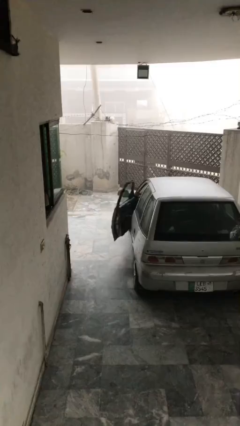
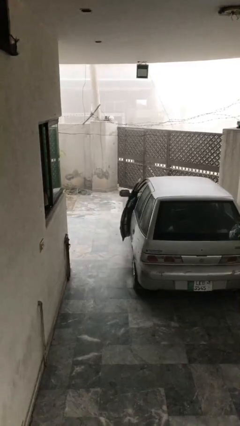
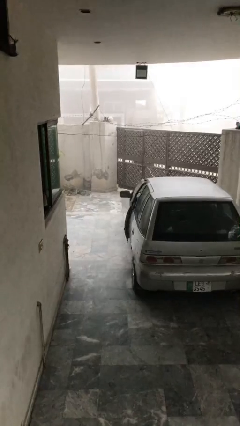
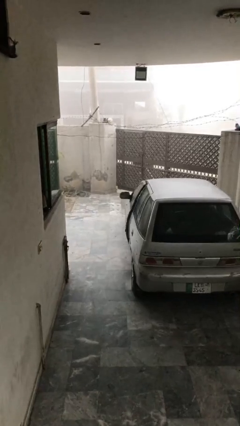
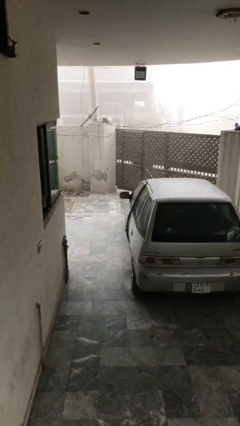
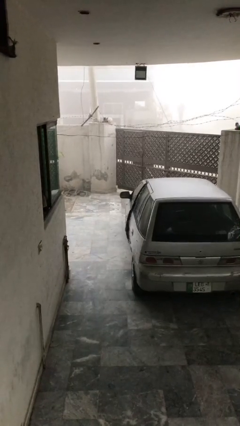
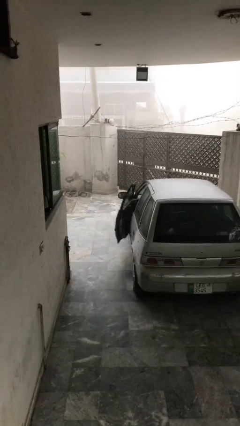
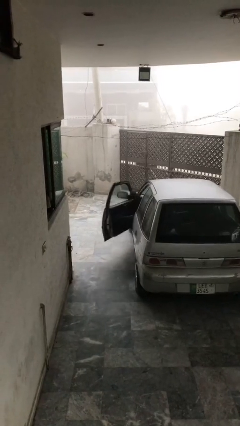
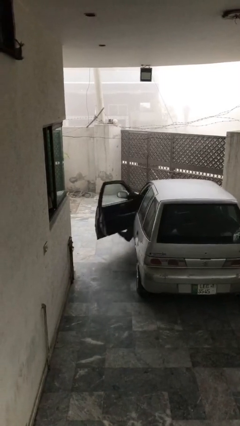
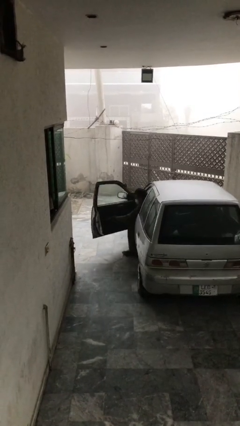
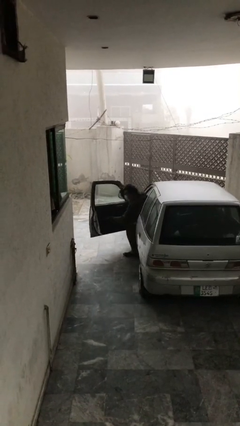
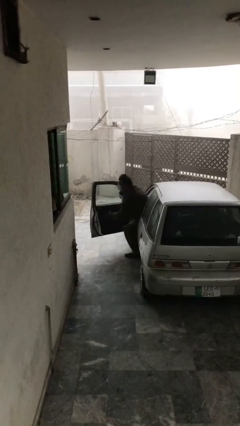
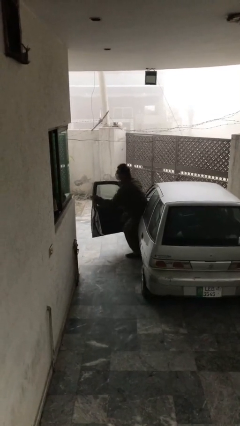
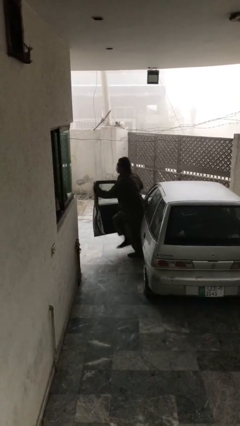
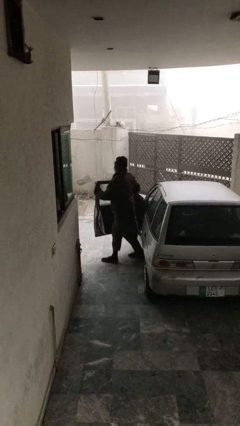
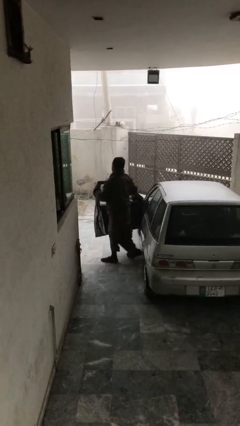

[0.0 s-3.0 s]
car drops off person

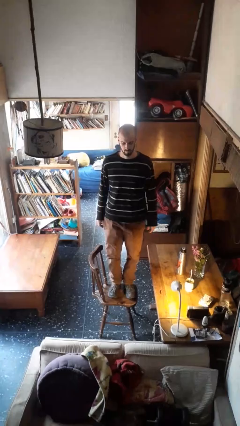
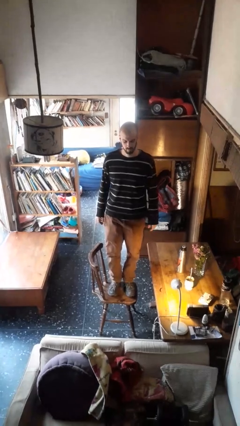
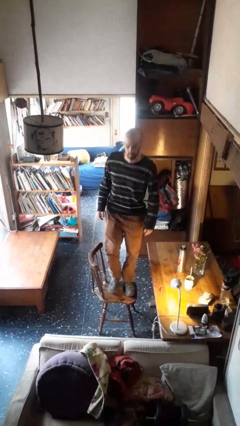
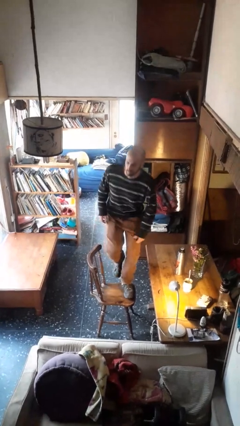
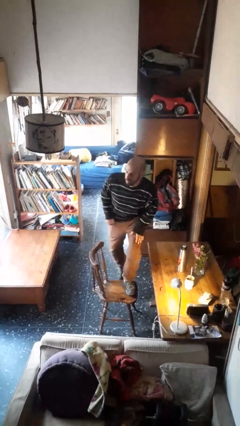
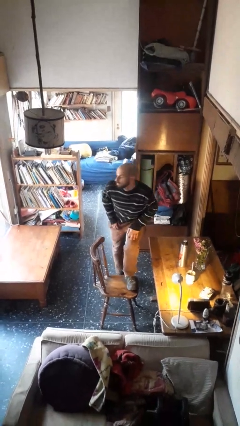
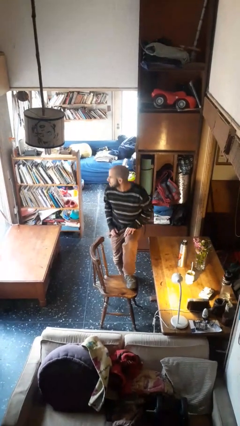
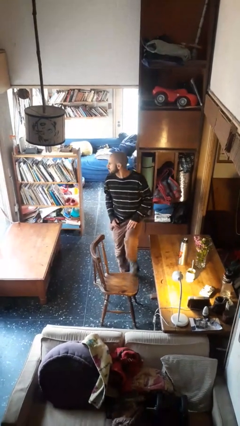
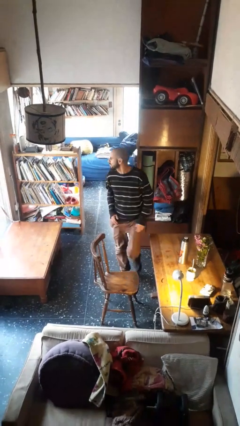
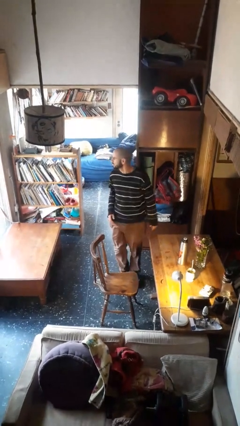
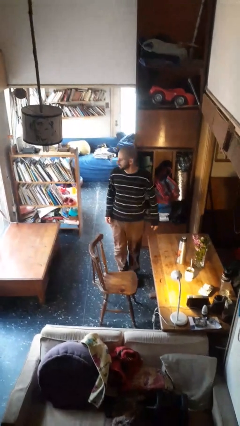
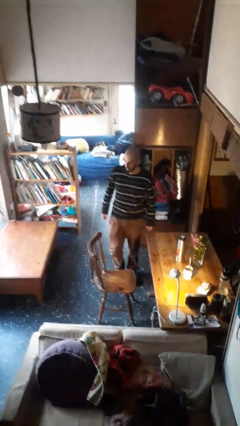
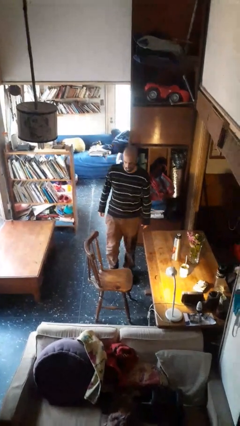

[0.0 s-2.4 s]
person climbs off chair

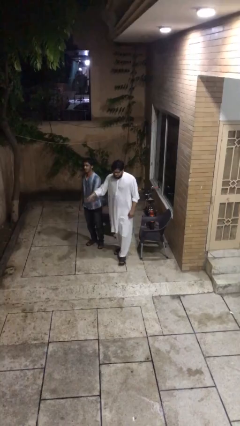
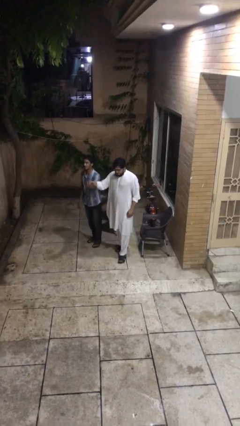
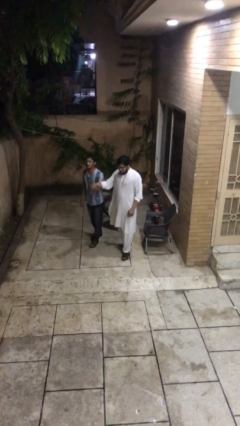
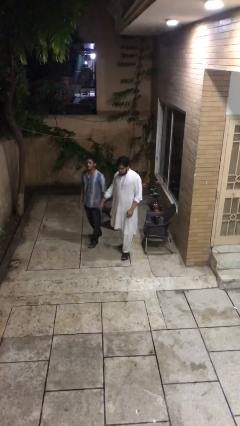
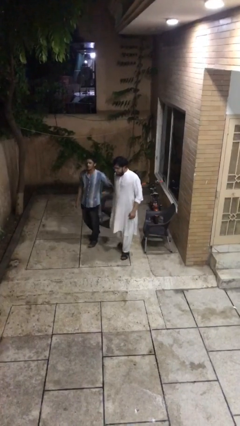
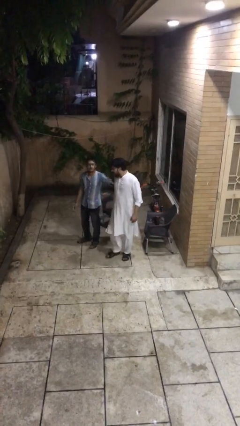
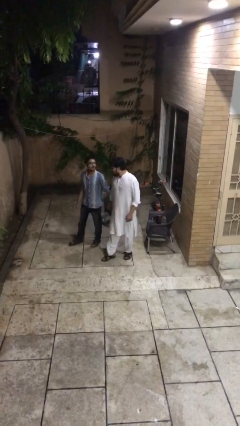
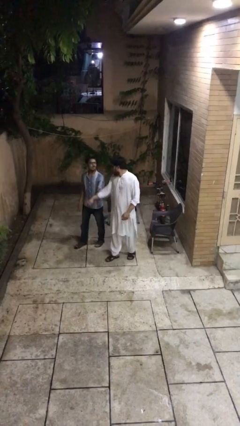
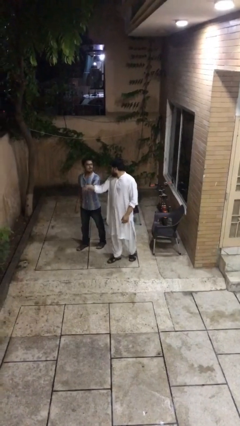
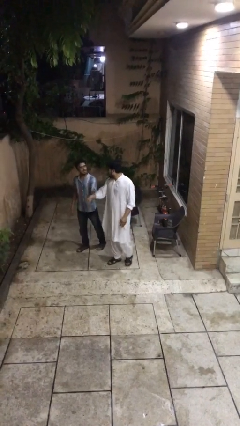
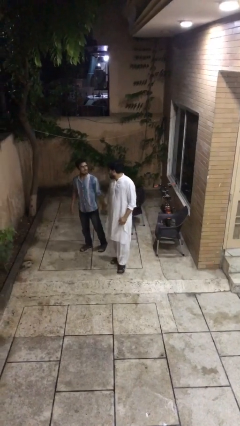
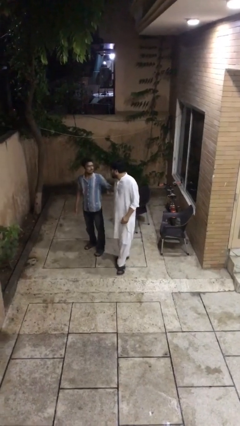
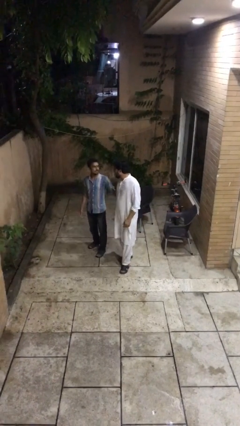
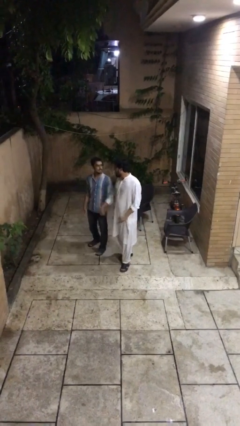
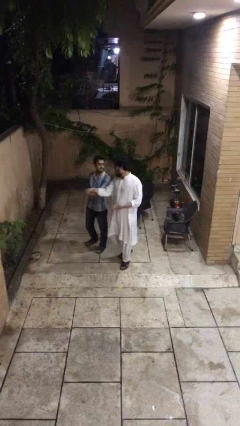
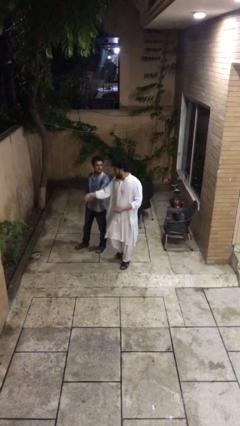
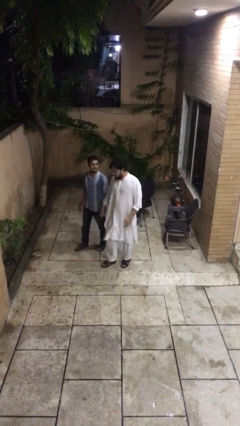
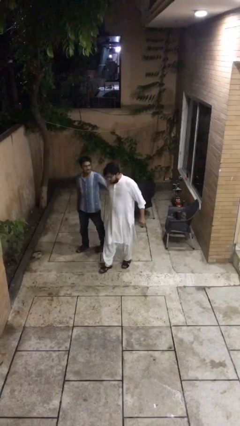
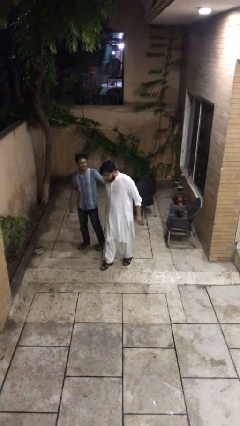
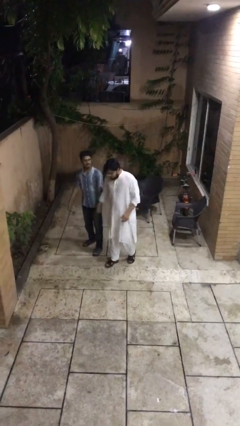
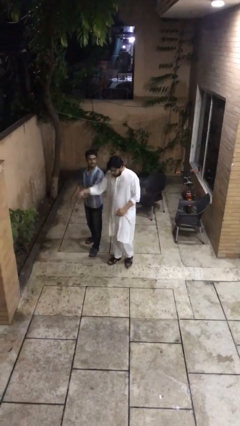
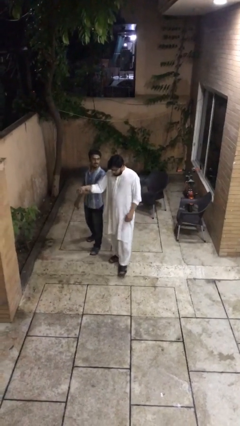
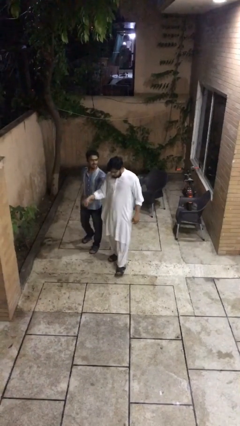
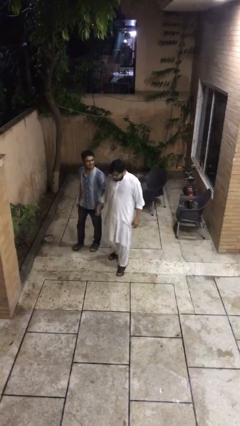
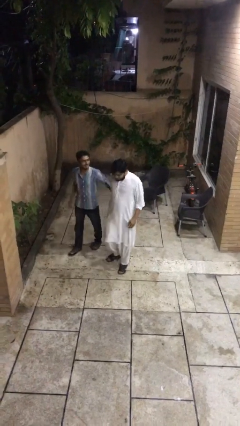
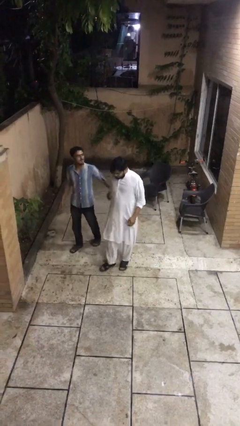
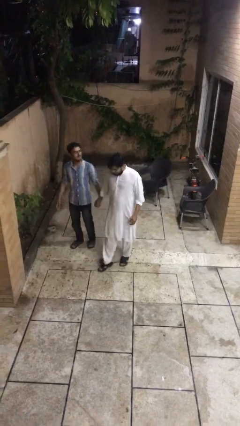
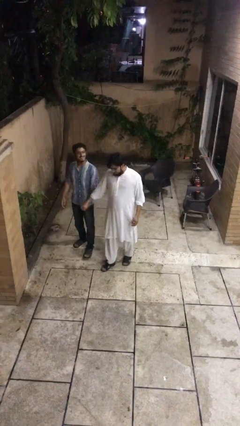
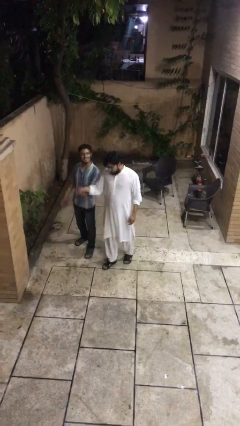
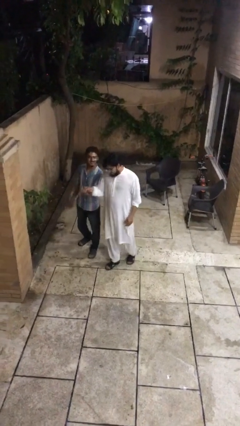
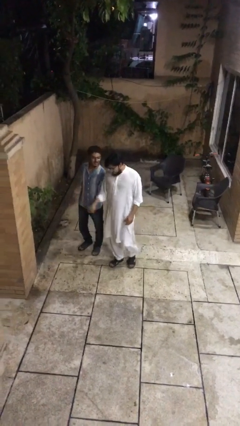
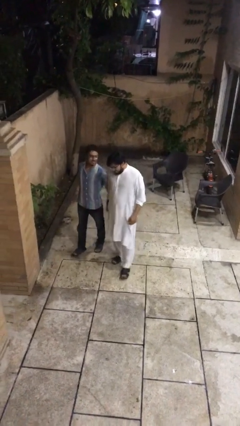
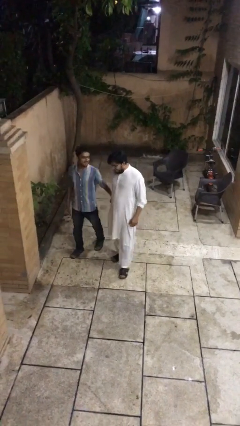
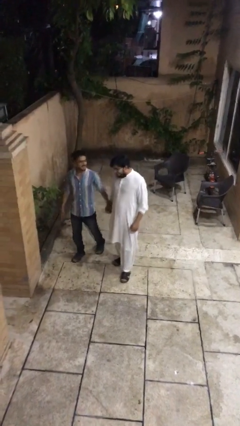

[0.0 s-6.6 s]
person holds hand

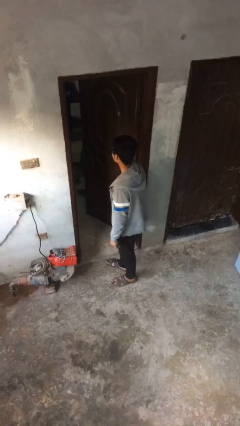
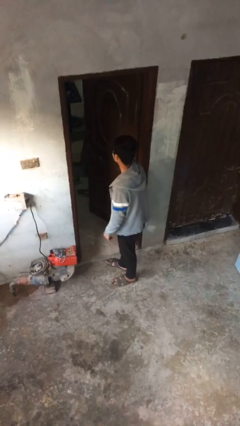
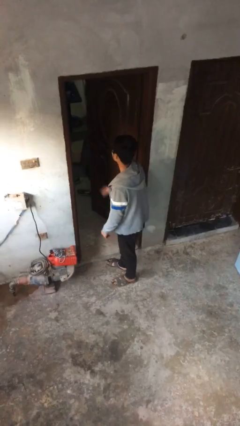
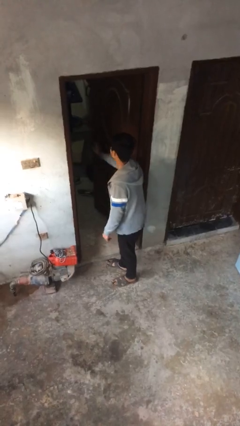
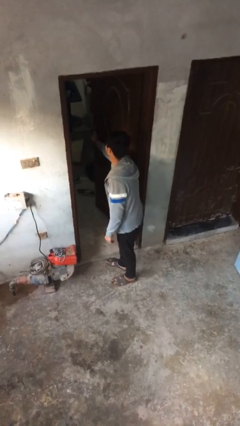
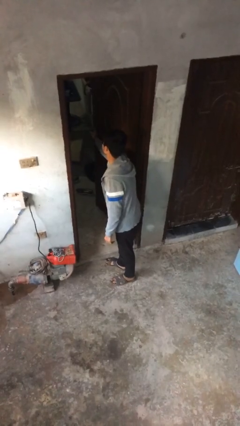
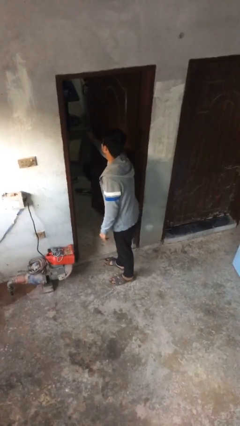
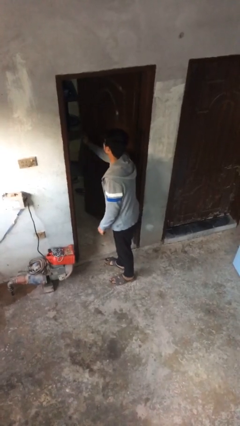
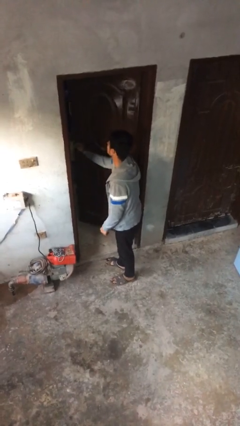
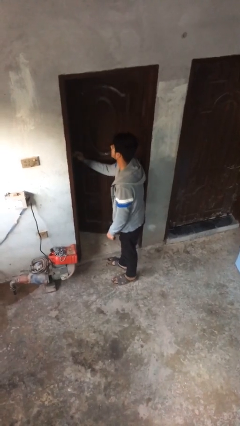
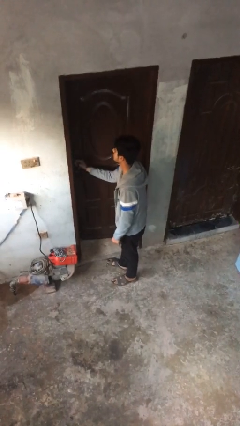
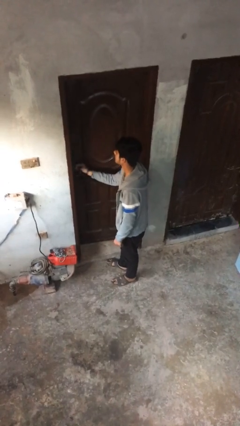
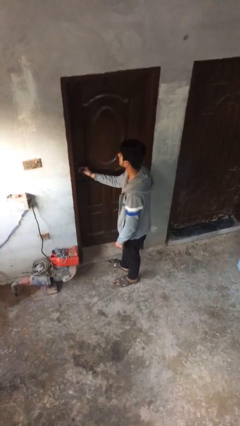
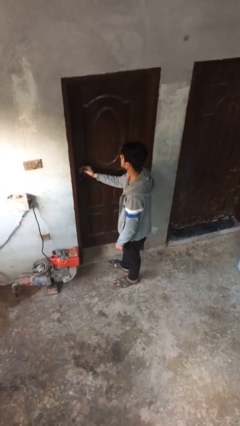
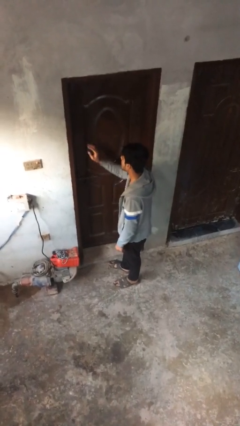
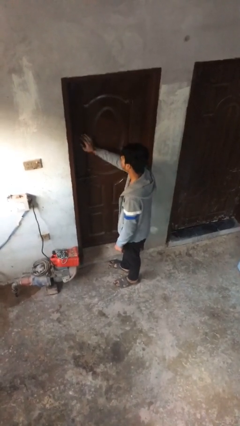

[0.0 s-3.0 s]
person closes facility door

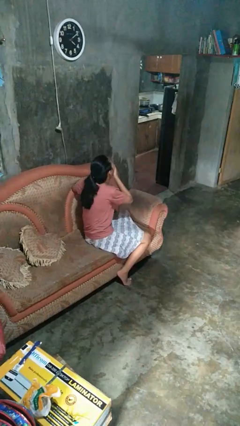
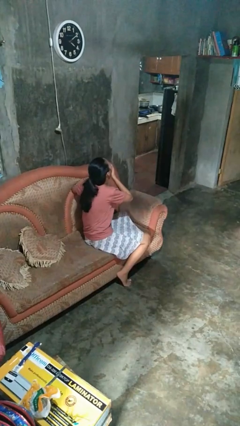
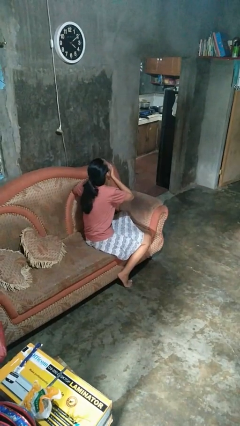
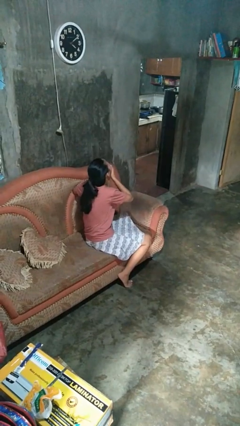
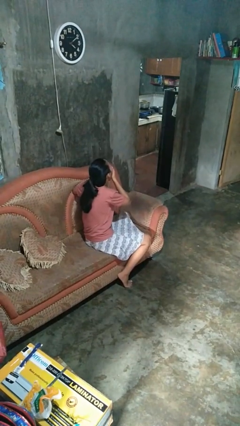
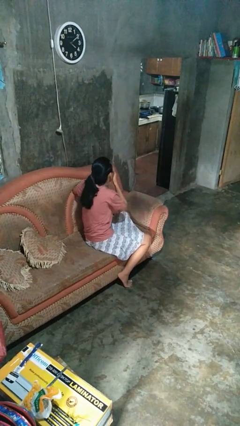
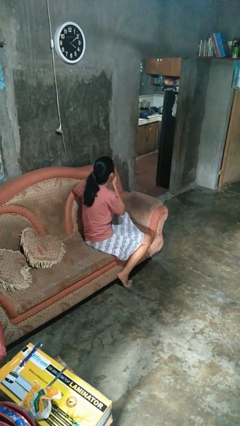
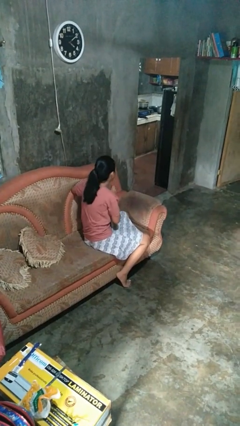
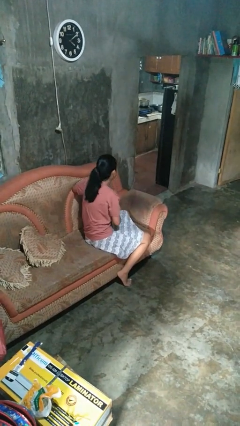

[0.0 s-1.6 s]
person yawns

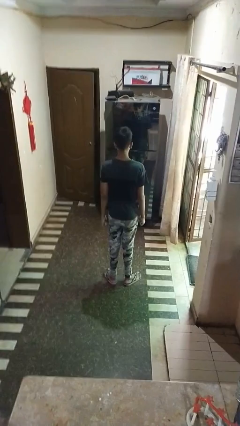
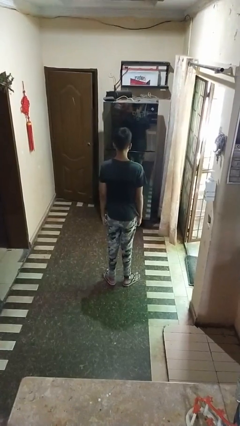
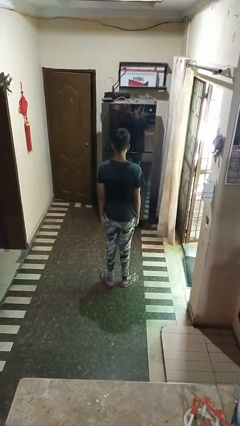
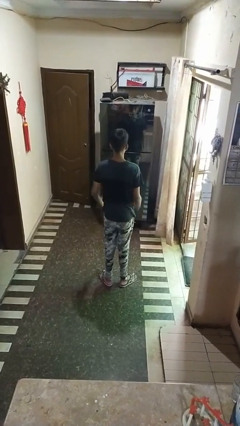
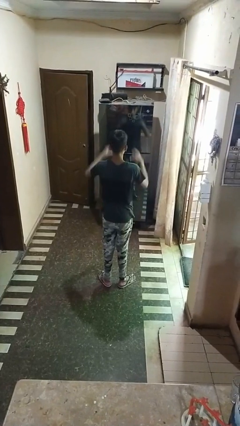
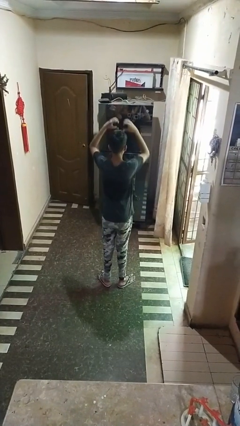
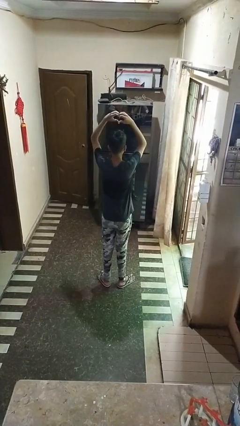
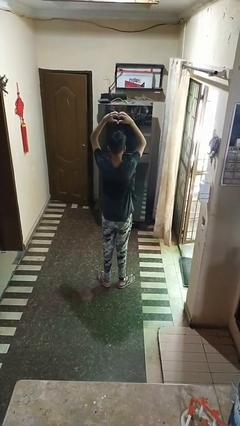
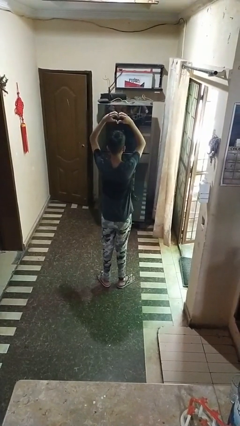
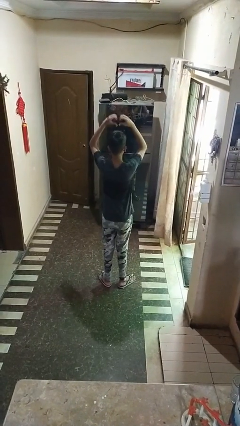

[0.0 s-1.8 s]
person gestures heart
